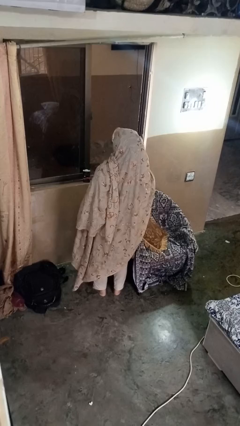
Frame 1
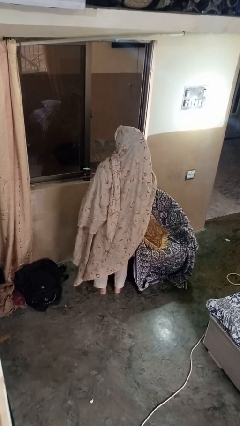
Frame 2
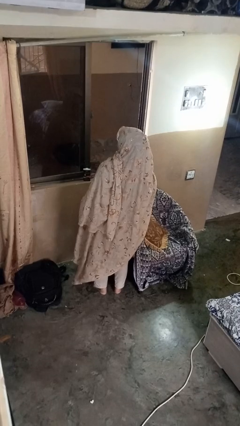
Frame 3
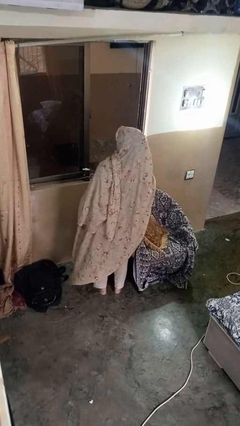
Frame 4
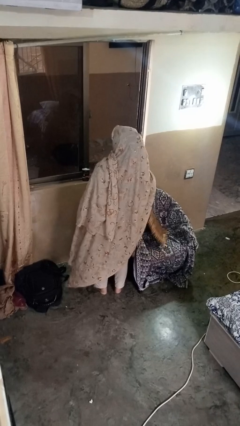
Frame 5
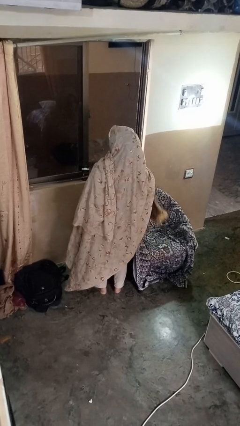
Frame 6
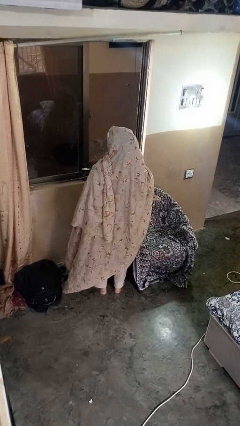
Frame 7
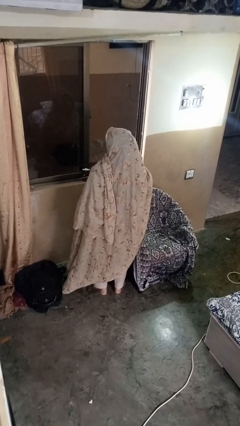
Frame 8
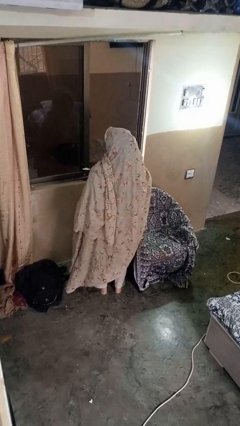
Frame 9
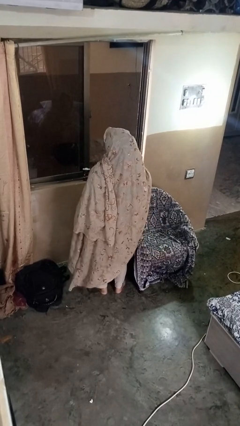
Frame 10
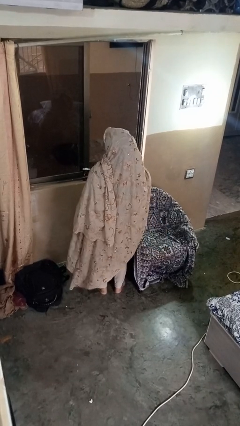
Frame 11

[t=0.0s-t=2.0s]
person picks up object from couch

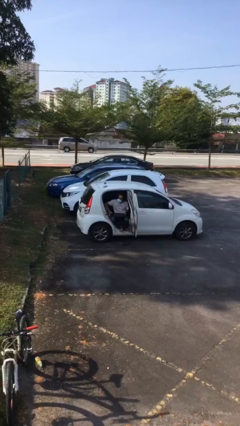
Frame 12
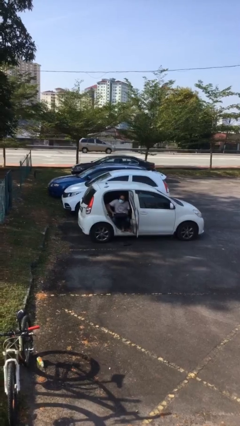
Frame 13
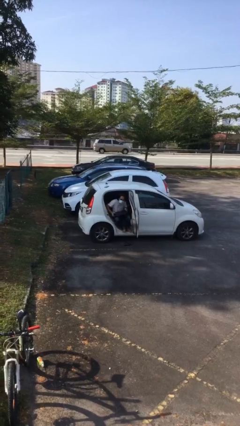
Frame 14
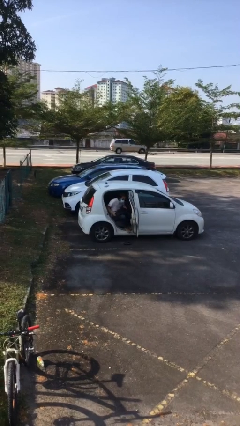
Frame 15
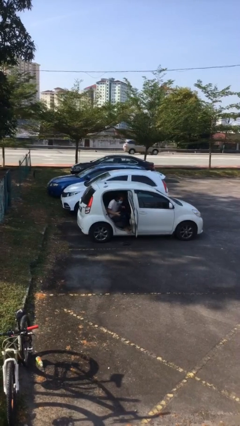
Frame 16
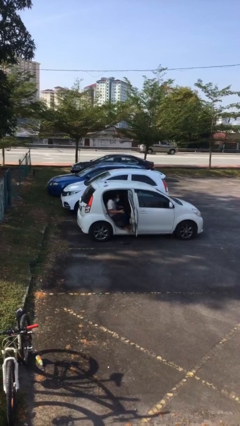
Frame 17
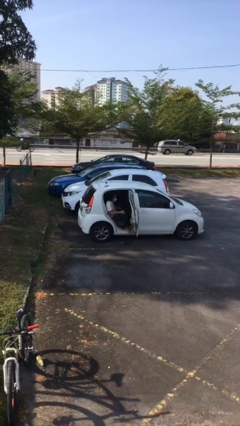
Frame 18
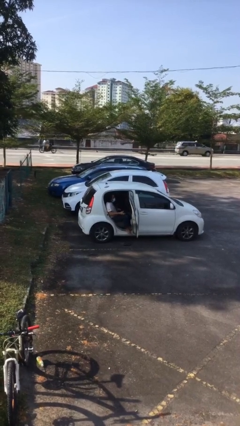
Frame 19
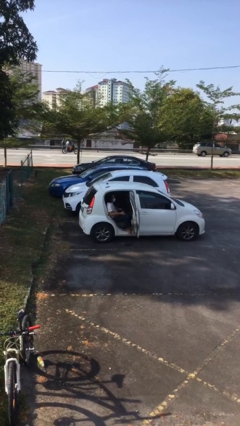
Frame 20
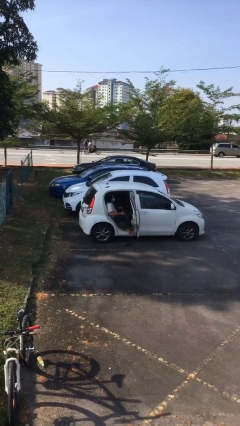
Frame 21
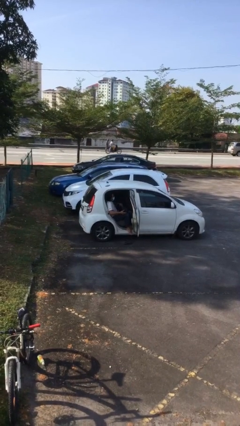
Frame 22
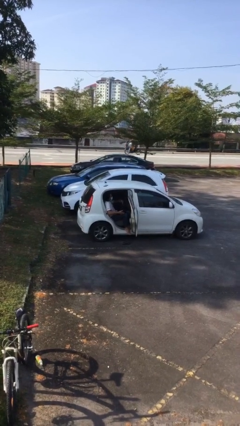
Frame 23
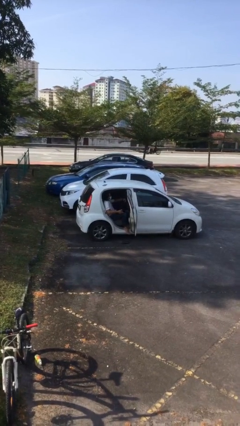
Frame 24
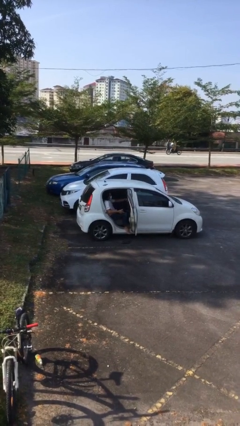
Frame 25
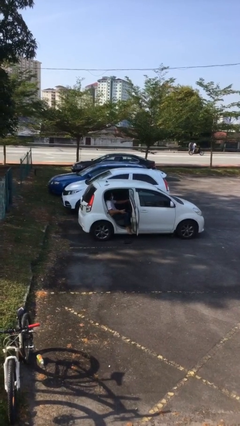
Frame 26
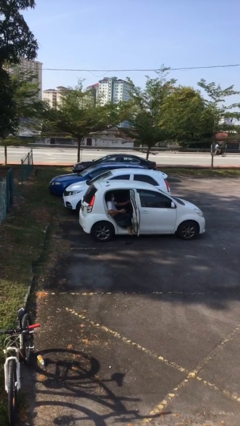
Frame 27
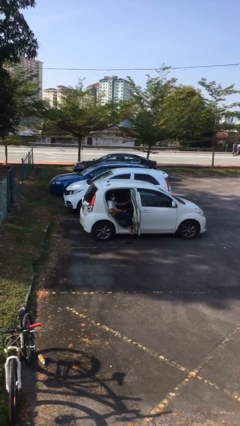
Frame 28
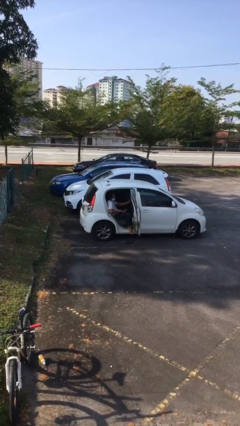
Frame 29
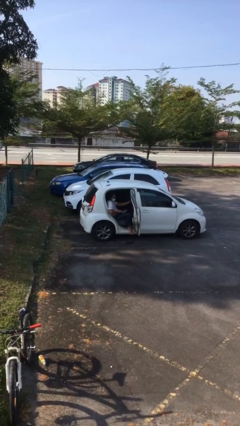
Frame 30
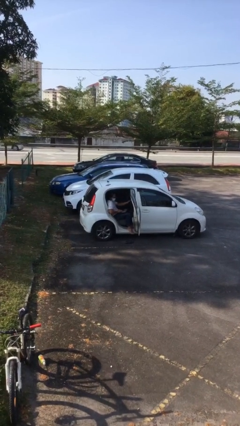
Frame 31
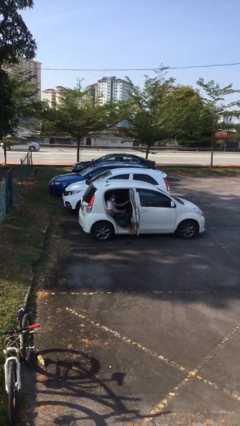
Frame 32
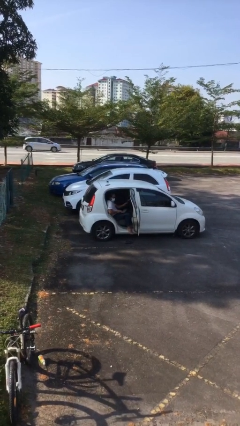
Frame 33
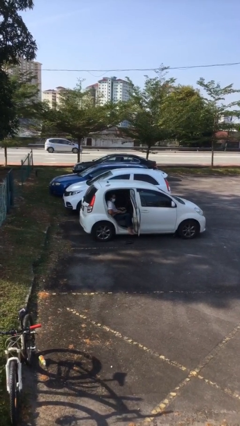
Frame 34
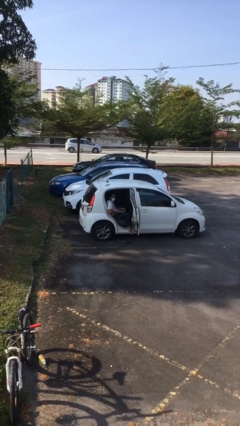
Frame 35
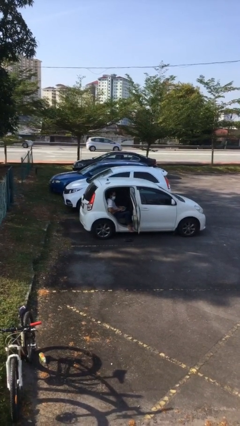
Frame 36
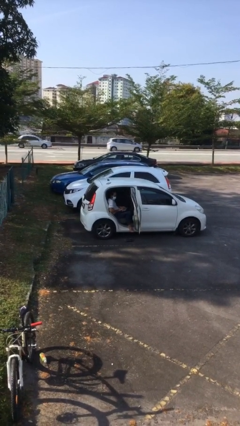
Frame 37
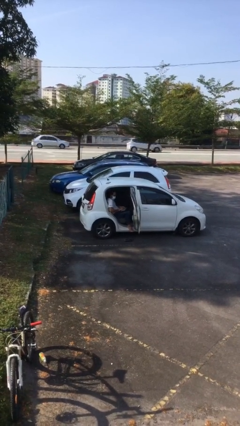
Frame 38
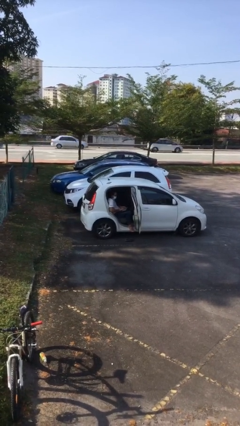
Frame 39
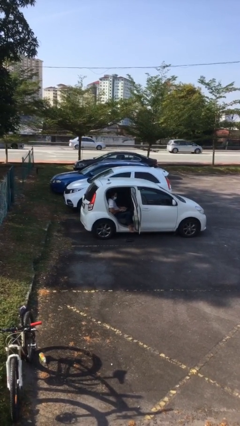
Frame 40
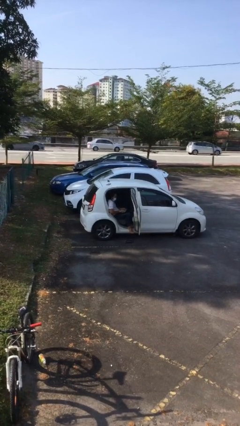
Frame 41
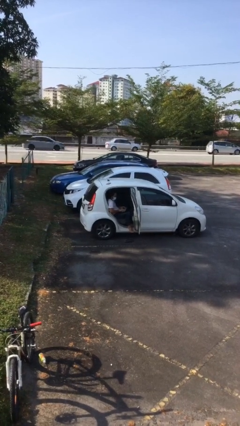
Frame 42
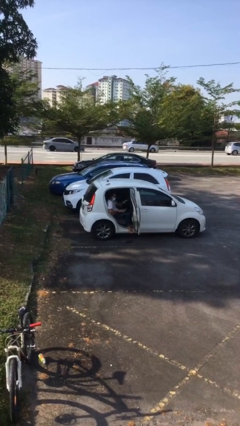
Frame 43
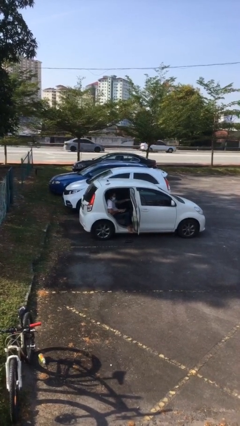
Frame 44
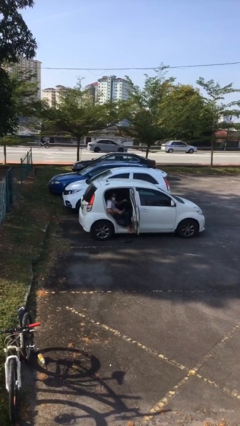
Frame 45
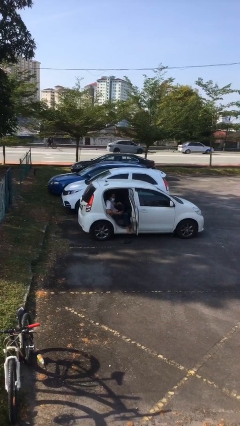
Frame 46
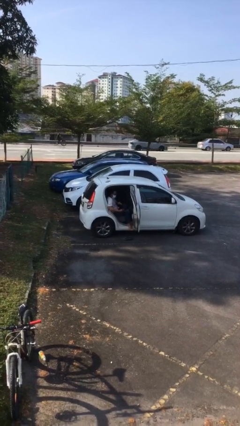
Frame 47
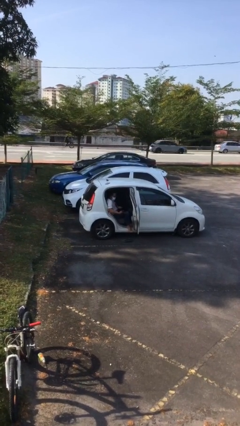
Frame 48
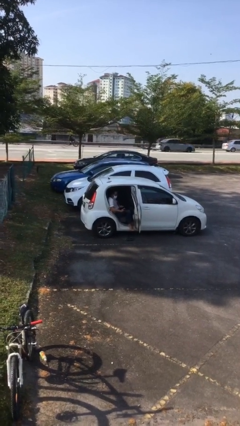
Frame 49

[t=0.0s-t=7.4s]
person interacts with laptop

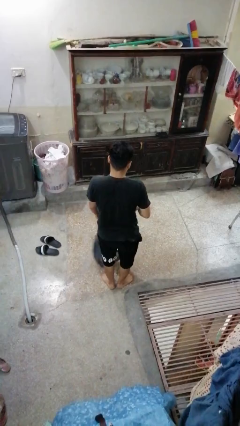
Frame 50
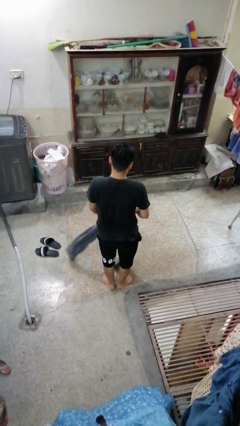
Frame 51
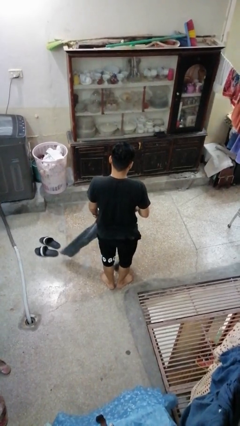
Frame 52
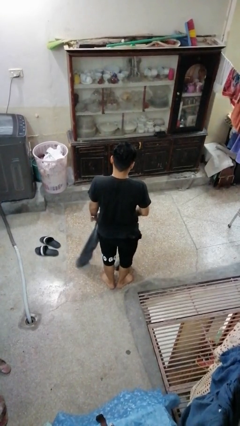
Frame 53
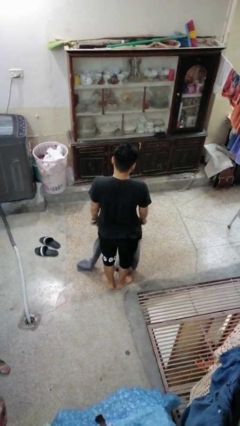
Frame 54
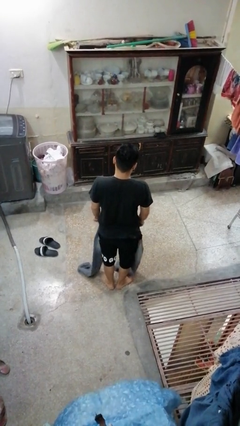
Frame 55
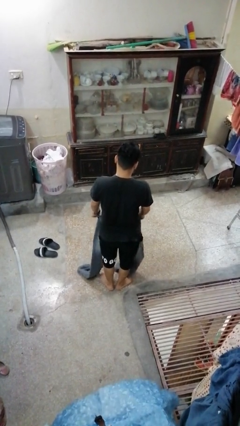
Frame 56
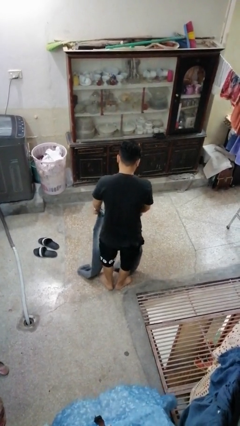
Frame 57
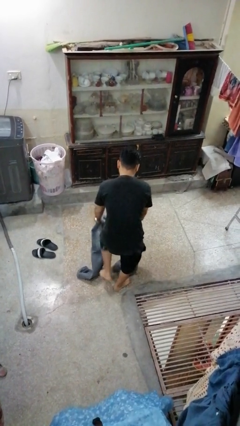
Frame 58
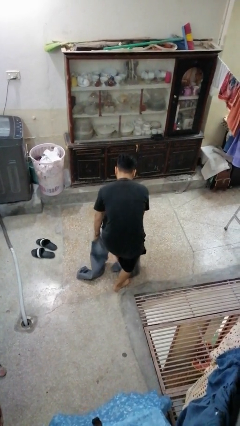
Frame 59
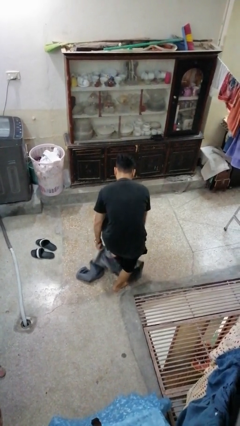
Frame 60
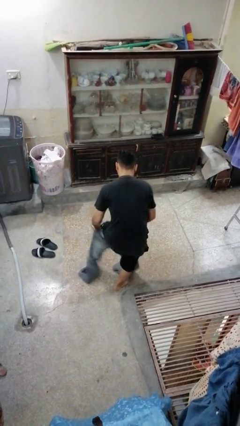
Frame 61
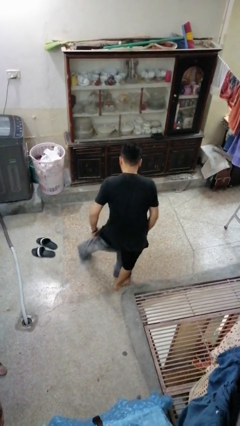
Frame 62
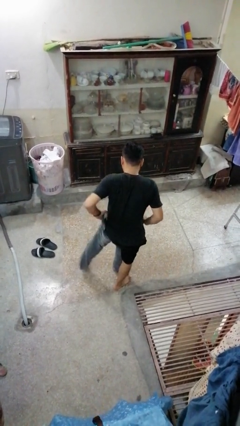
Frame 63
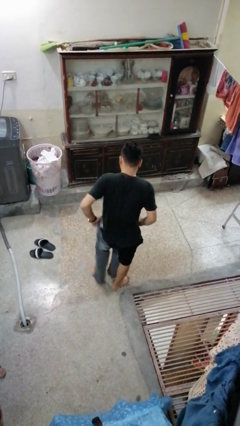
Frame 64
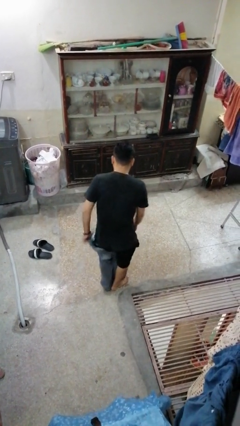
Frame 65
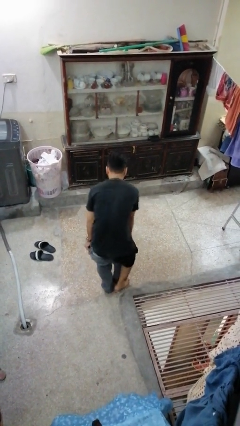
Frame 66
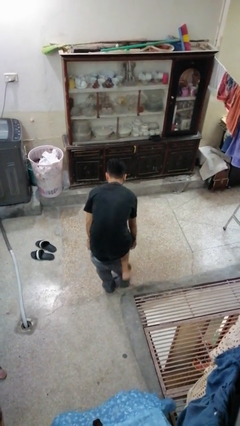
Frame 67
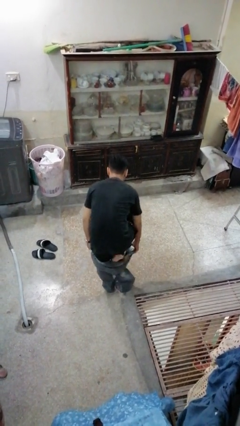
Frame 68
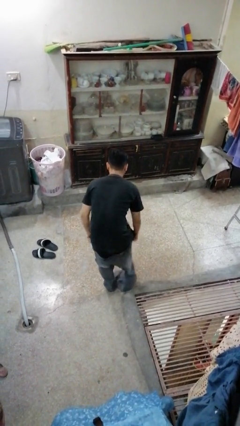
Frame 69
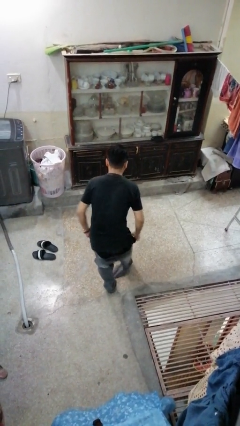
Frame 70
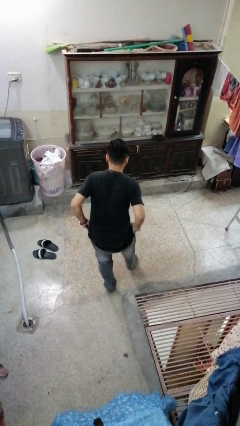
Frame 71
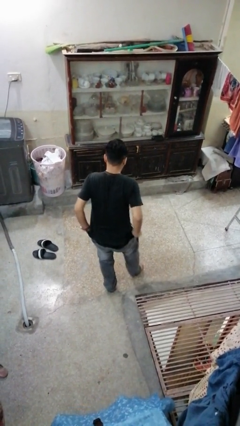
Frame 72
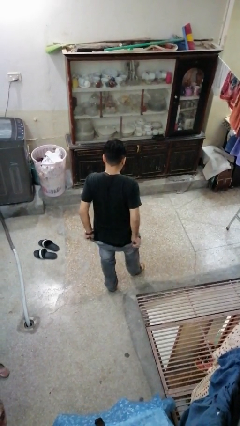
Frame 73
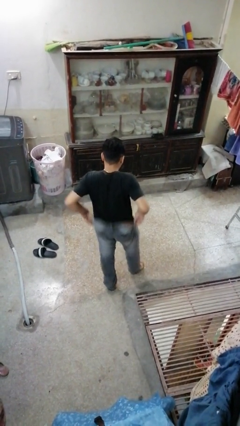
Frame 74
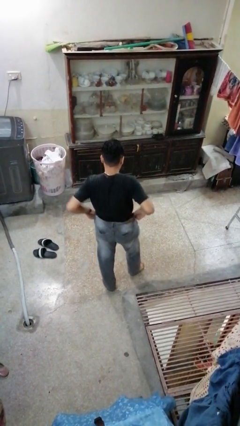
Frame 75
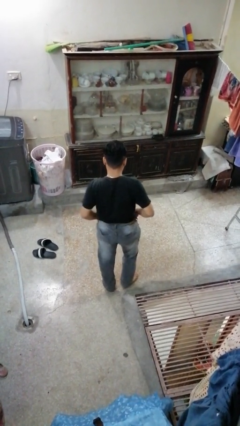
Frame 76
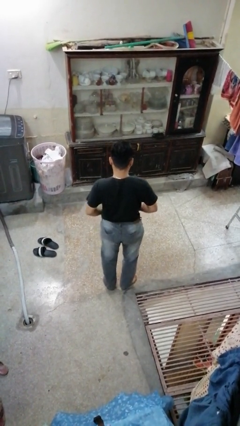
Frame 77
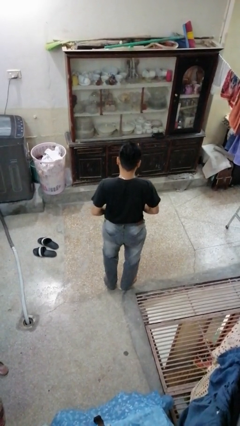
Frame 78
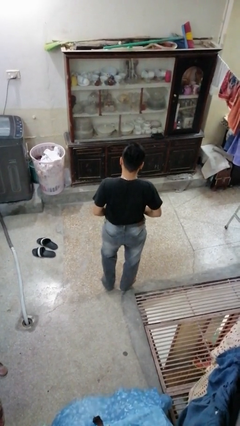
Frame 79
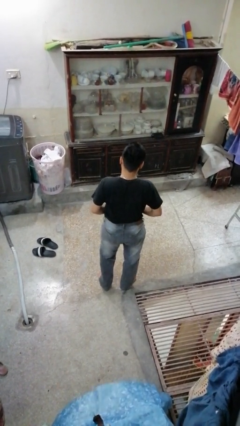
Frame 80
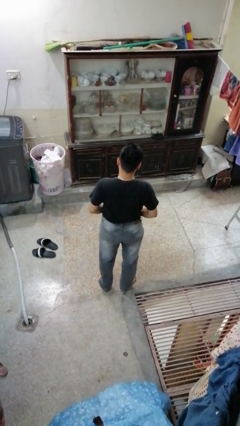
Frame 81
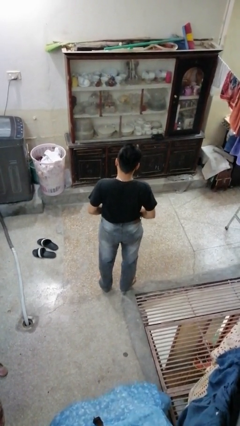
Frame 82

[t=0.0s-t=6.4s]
person puts on pants

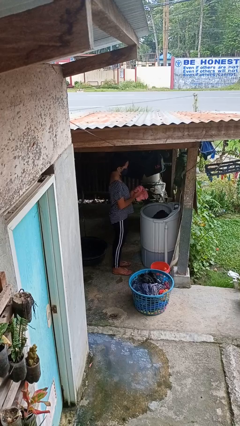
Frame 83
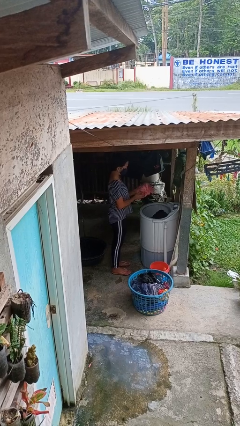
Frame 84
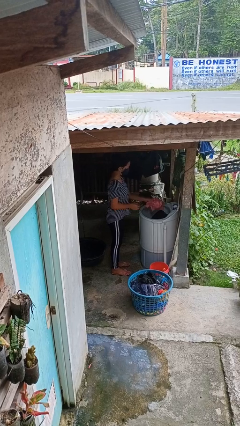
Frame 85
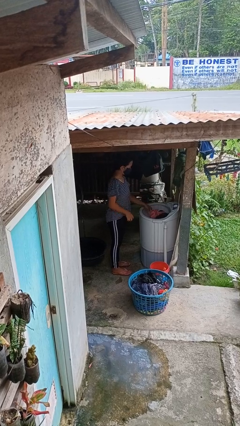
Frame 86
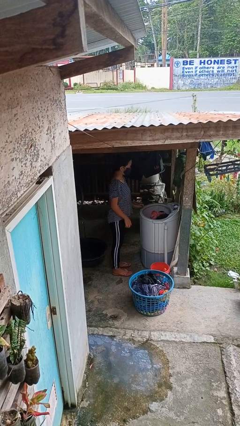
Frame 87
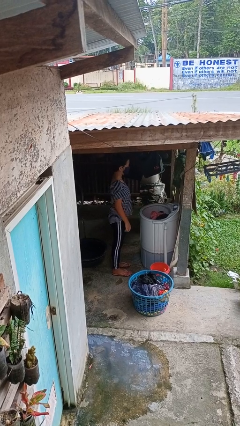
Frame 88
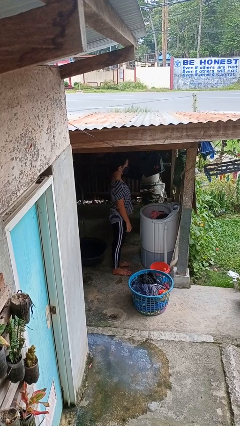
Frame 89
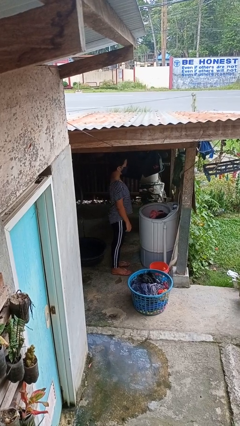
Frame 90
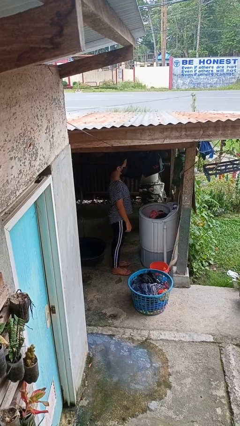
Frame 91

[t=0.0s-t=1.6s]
person loads clotheswasher

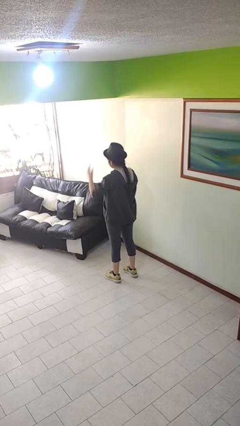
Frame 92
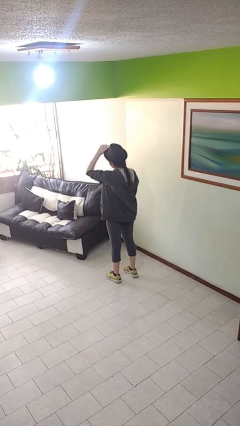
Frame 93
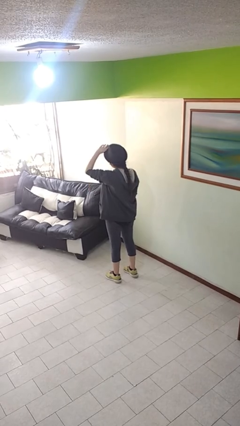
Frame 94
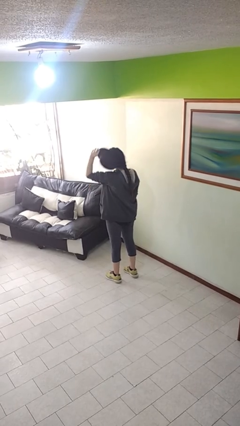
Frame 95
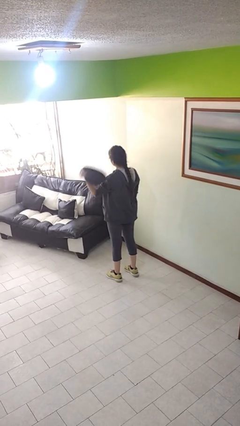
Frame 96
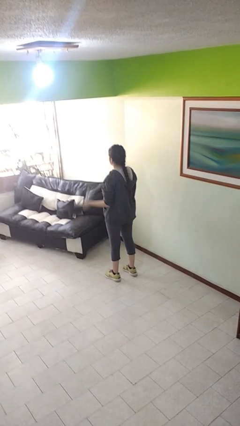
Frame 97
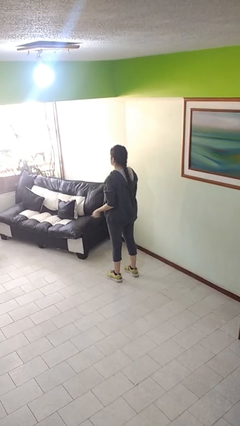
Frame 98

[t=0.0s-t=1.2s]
person takes off hat
